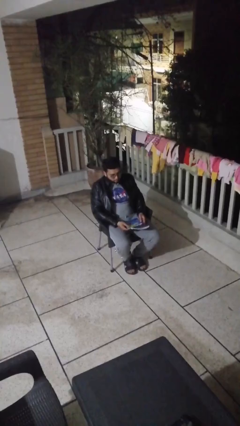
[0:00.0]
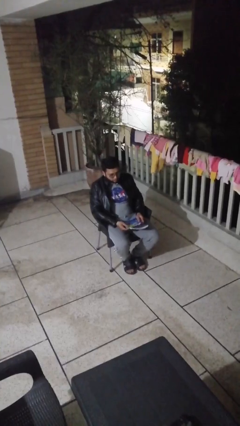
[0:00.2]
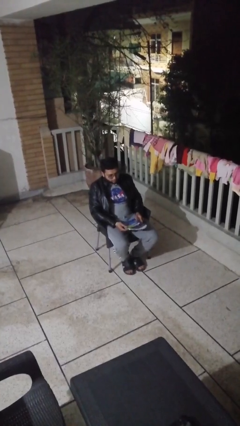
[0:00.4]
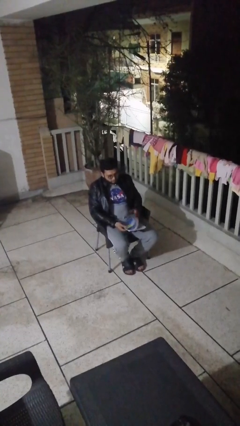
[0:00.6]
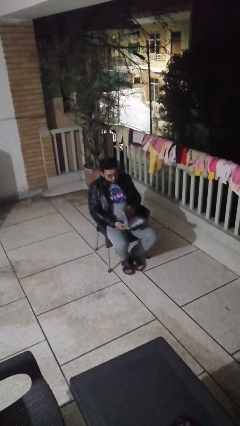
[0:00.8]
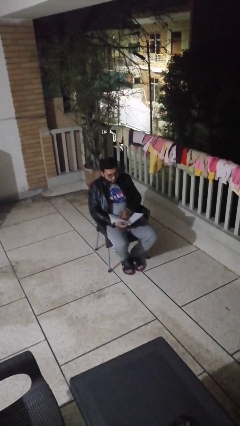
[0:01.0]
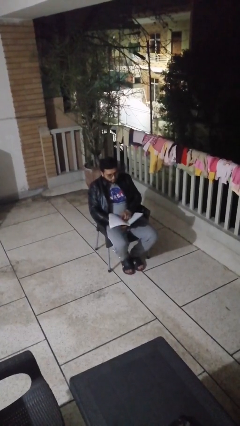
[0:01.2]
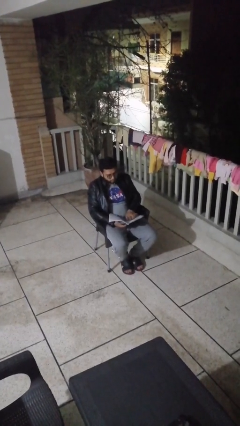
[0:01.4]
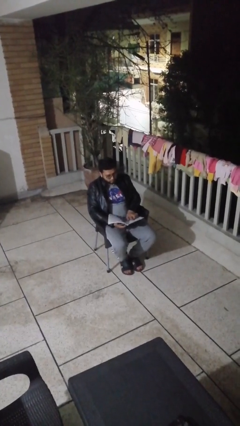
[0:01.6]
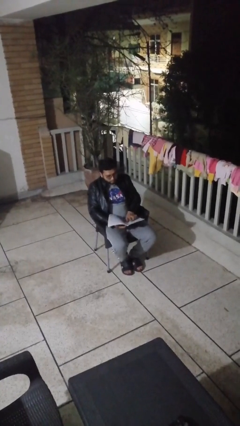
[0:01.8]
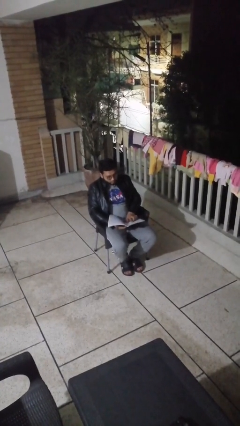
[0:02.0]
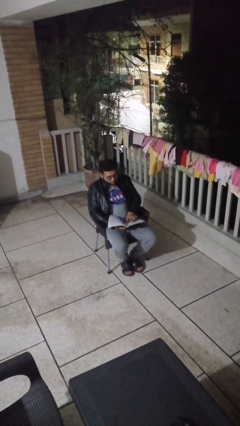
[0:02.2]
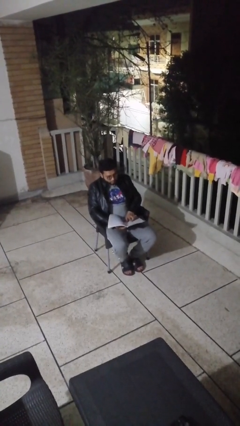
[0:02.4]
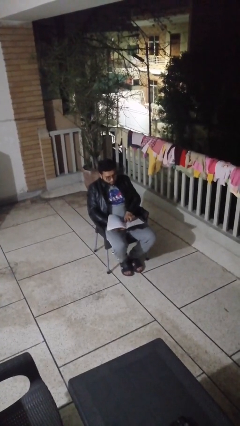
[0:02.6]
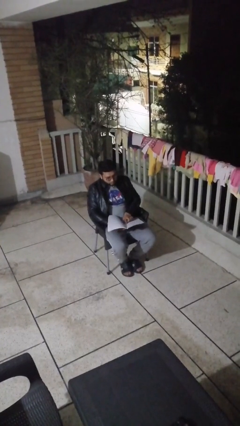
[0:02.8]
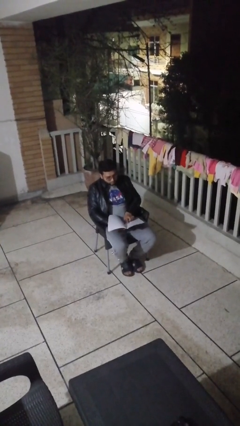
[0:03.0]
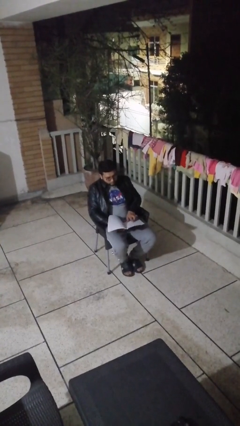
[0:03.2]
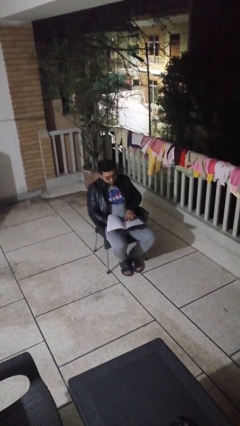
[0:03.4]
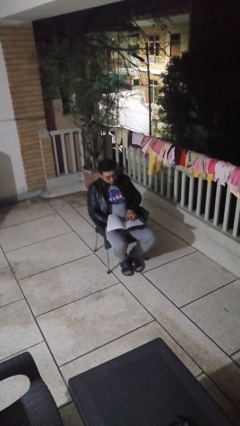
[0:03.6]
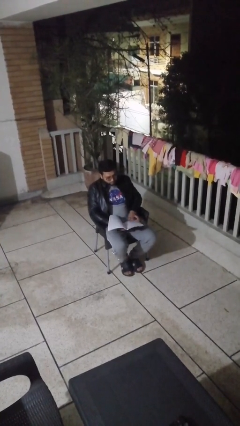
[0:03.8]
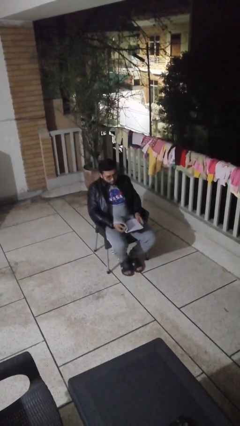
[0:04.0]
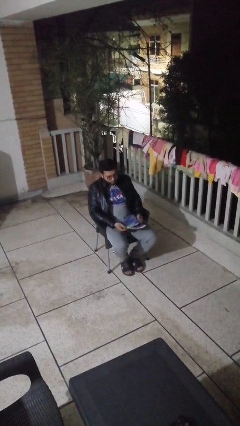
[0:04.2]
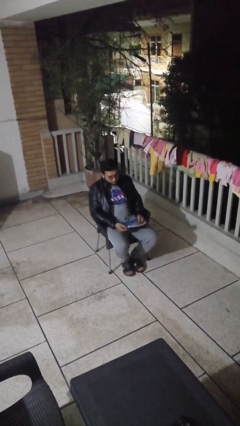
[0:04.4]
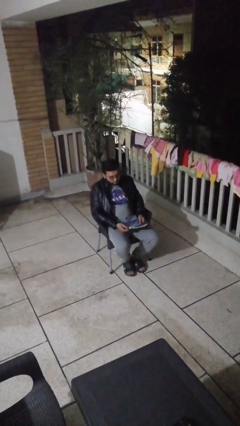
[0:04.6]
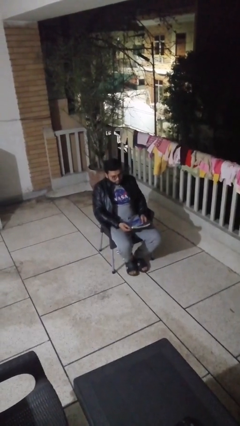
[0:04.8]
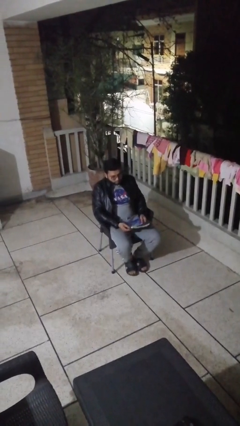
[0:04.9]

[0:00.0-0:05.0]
person reads document

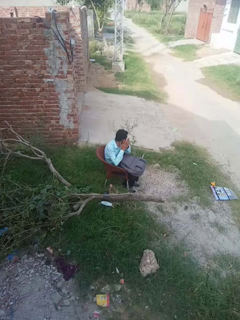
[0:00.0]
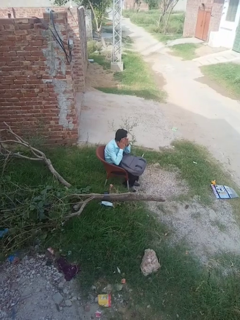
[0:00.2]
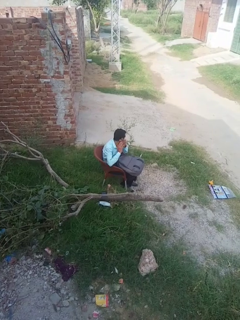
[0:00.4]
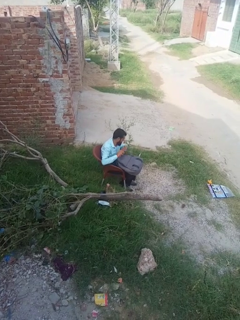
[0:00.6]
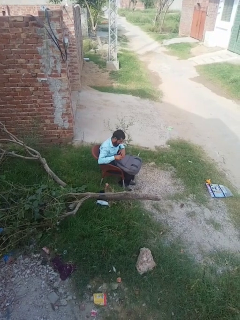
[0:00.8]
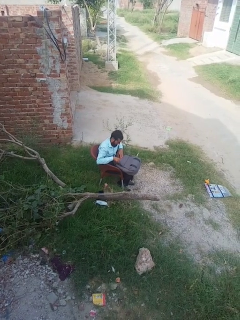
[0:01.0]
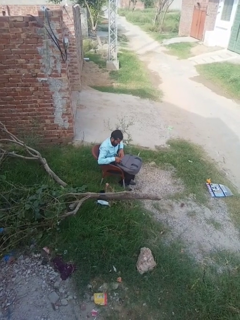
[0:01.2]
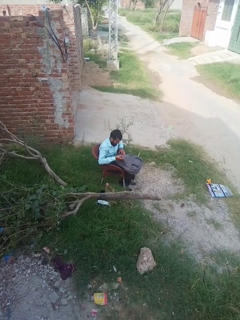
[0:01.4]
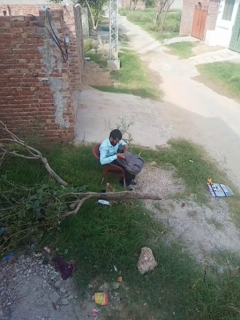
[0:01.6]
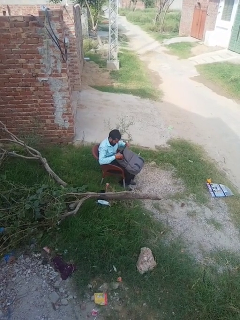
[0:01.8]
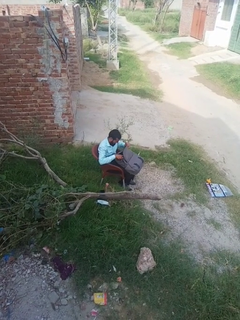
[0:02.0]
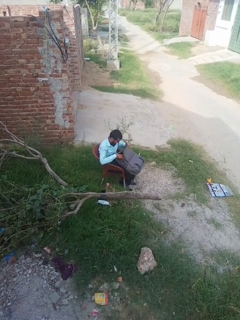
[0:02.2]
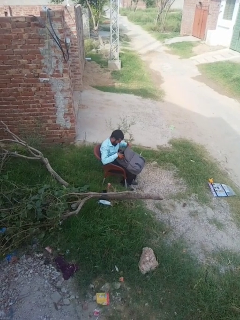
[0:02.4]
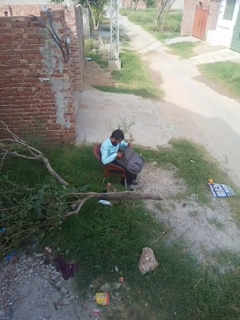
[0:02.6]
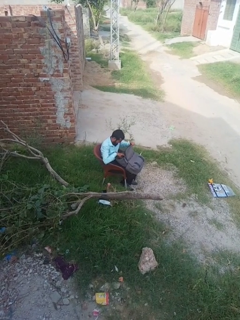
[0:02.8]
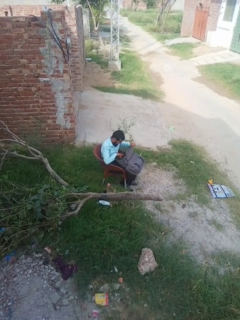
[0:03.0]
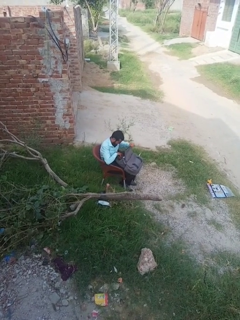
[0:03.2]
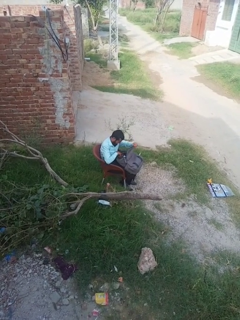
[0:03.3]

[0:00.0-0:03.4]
person searches in backpack

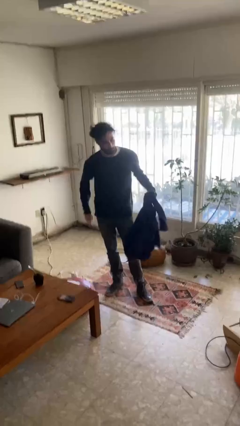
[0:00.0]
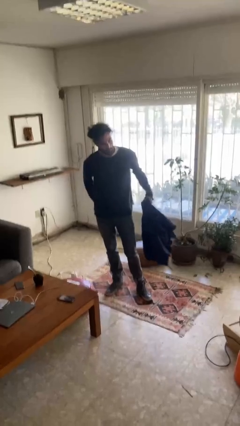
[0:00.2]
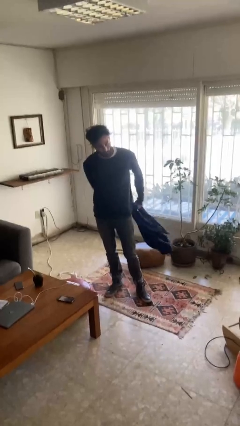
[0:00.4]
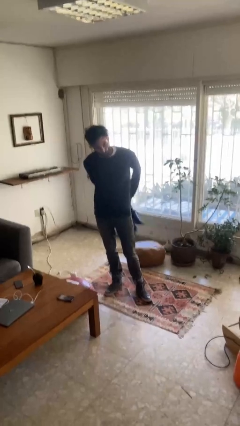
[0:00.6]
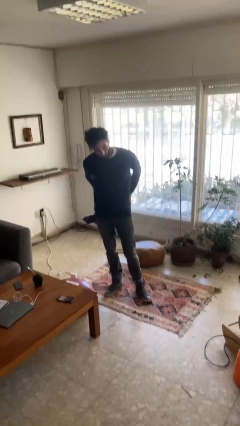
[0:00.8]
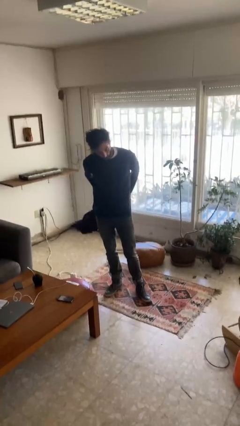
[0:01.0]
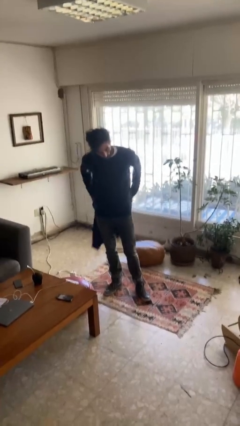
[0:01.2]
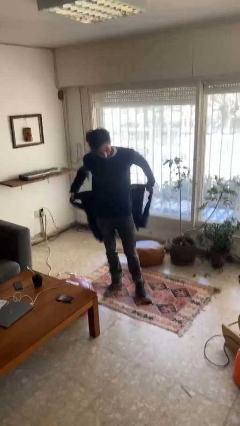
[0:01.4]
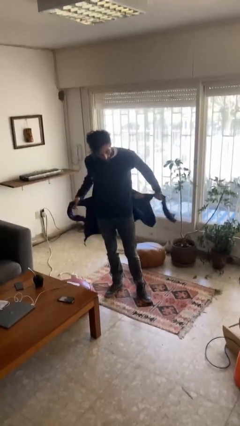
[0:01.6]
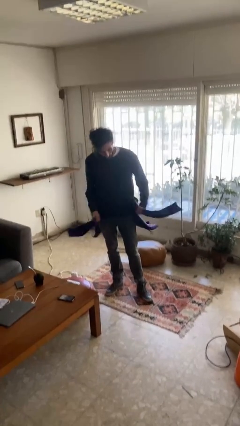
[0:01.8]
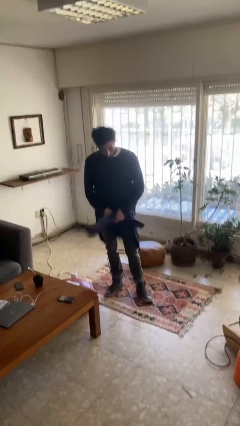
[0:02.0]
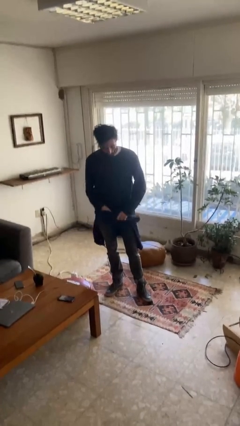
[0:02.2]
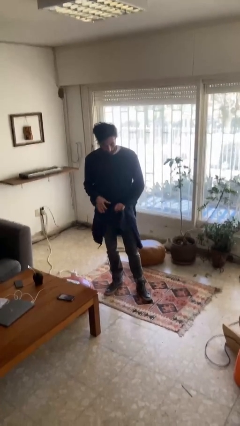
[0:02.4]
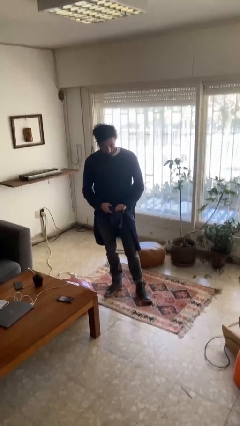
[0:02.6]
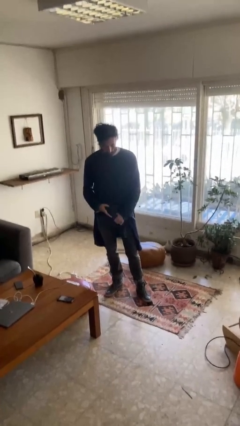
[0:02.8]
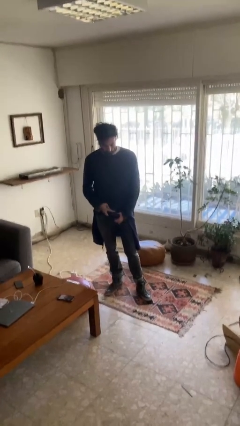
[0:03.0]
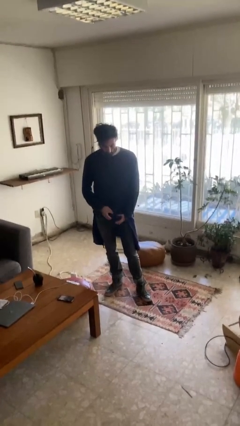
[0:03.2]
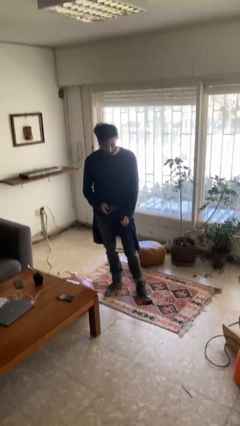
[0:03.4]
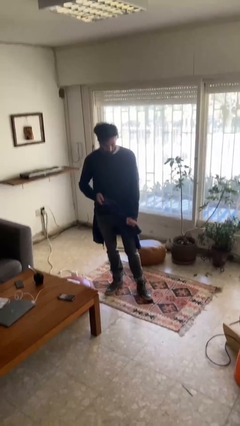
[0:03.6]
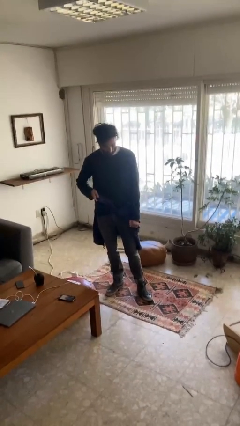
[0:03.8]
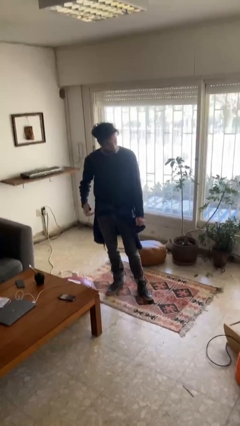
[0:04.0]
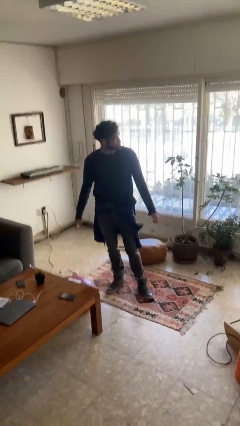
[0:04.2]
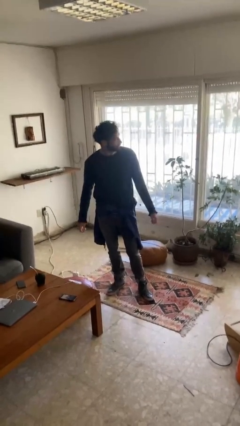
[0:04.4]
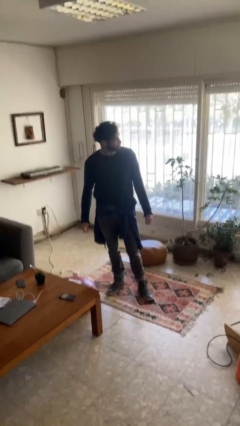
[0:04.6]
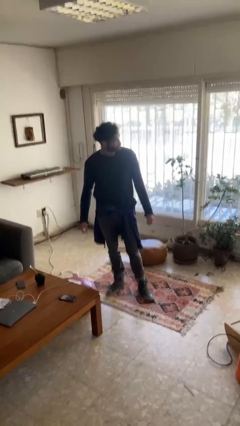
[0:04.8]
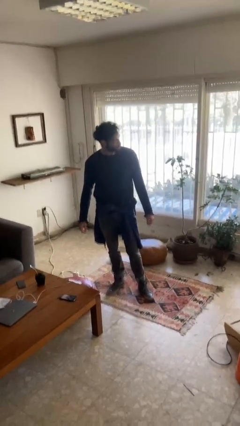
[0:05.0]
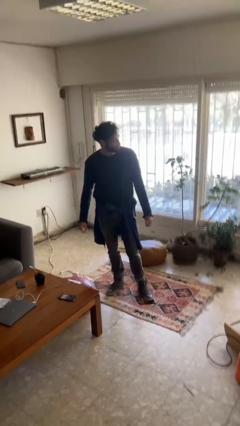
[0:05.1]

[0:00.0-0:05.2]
person ties jacket around waist

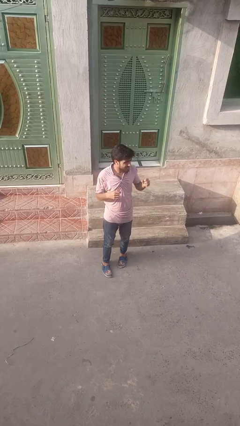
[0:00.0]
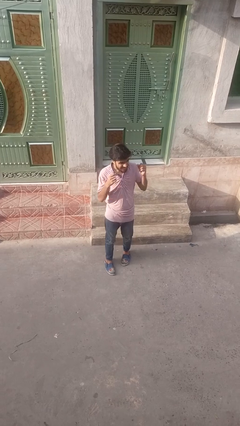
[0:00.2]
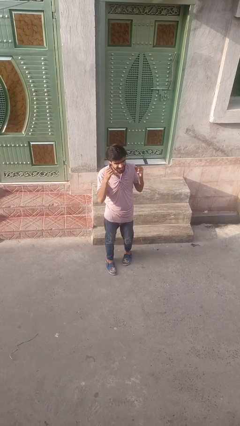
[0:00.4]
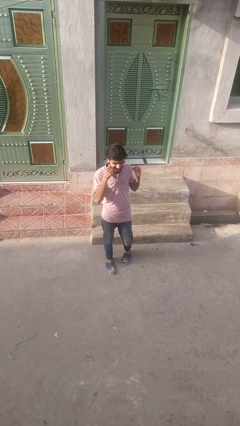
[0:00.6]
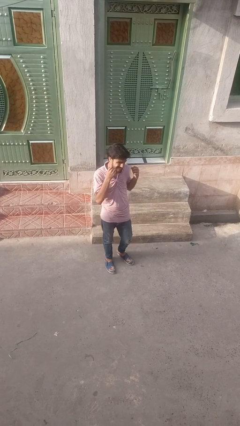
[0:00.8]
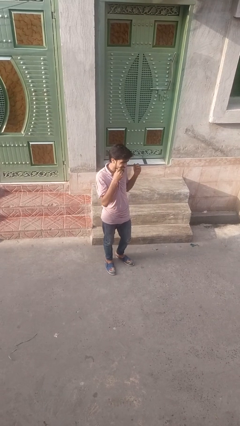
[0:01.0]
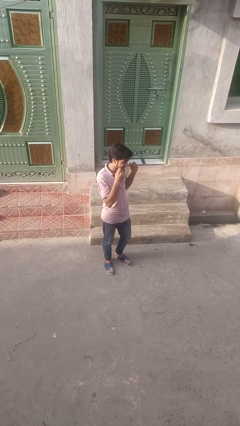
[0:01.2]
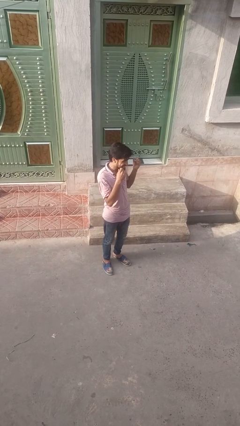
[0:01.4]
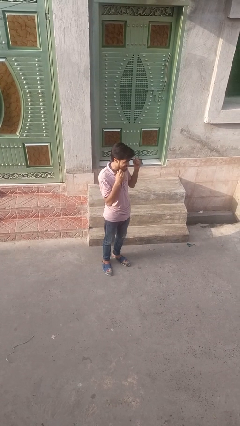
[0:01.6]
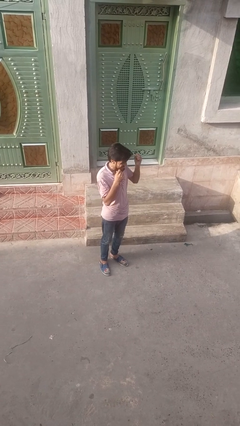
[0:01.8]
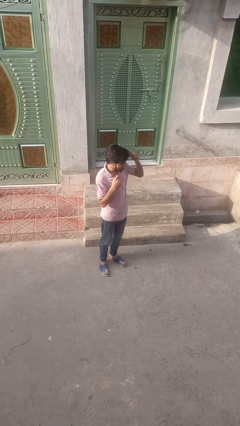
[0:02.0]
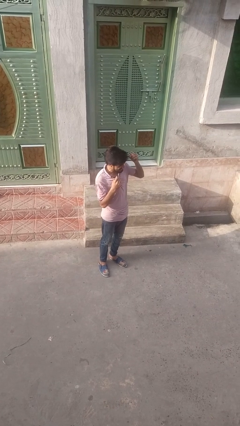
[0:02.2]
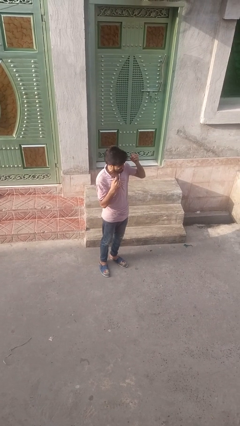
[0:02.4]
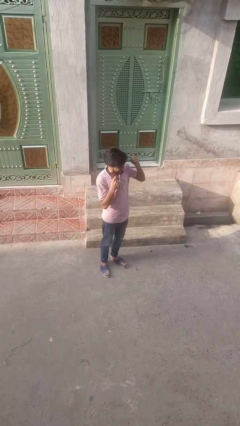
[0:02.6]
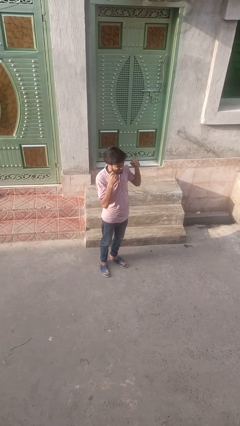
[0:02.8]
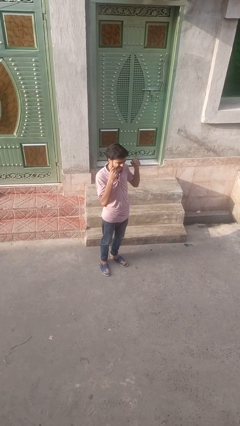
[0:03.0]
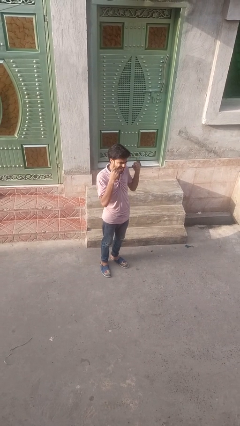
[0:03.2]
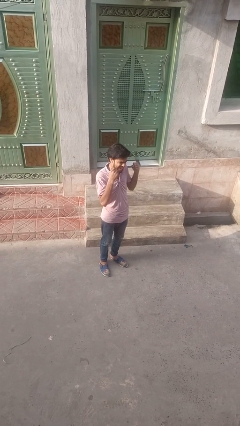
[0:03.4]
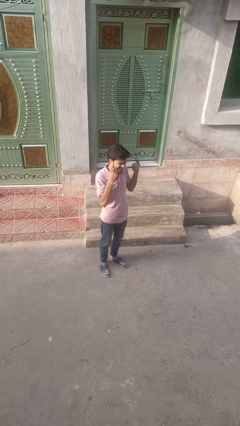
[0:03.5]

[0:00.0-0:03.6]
person flosses

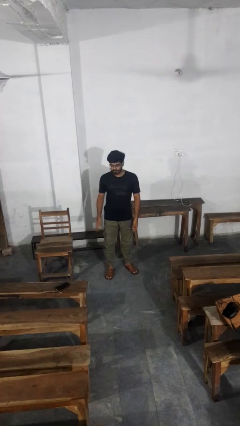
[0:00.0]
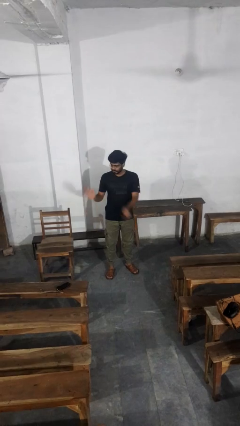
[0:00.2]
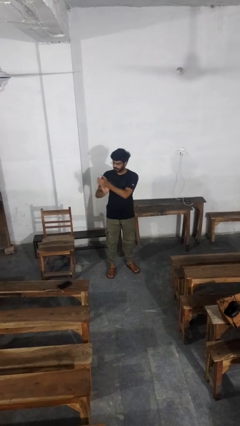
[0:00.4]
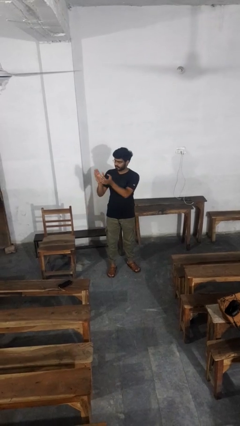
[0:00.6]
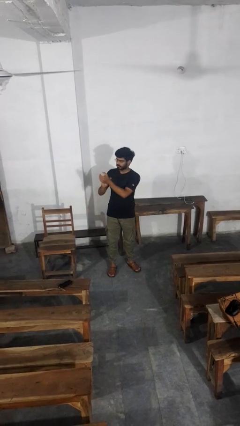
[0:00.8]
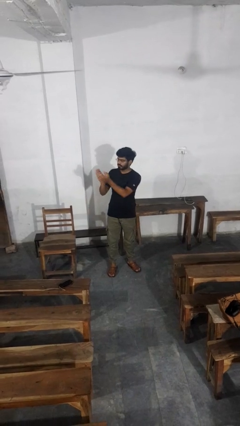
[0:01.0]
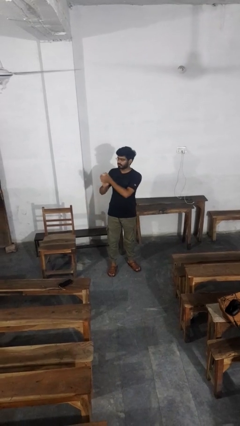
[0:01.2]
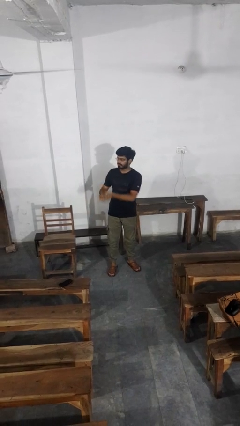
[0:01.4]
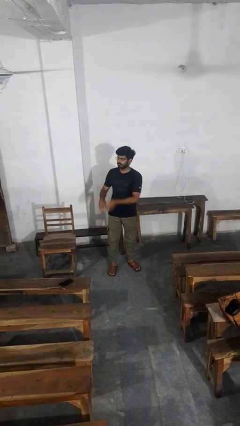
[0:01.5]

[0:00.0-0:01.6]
person claps hands
